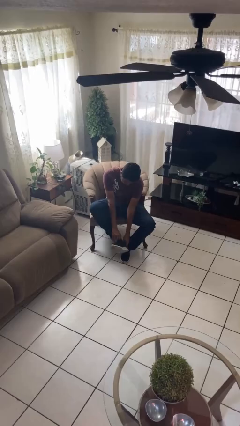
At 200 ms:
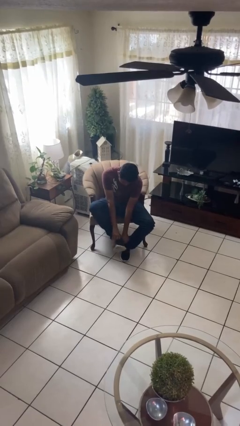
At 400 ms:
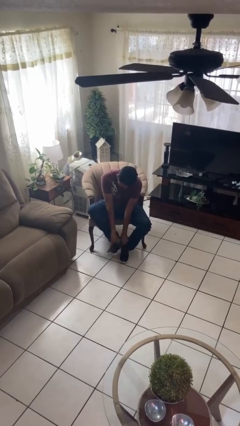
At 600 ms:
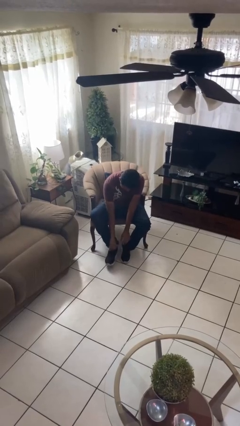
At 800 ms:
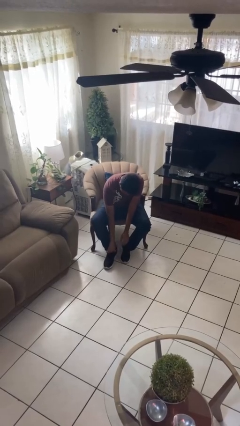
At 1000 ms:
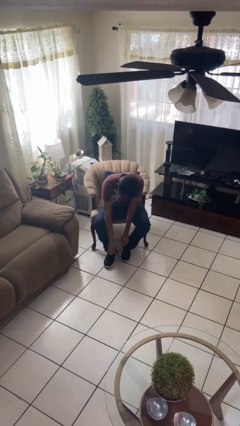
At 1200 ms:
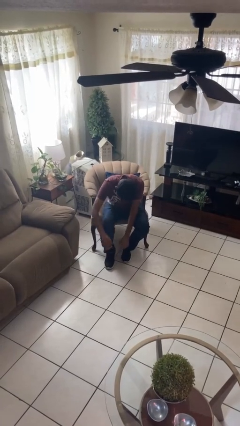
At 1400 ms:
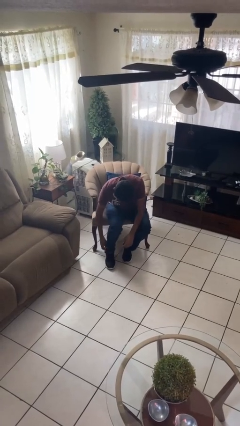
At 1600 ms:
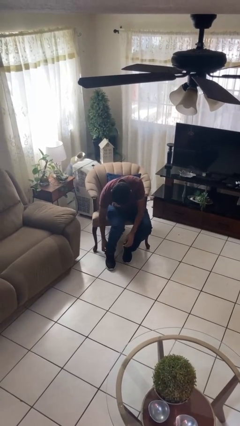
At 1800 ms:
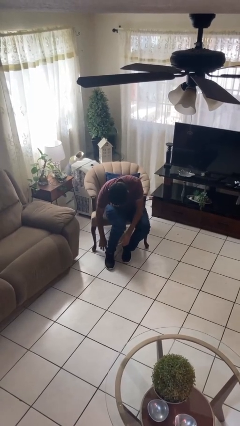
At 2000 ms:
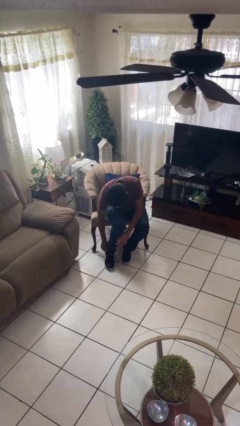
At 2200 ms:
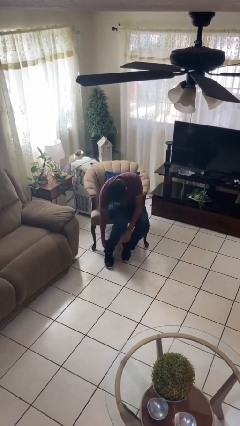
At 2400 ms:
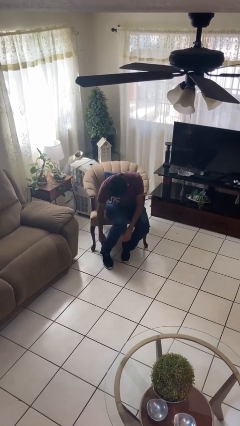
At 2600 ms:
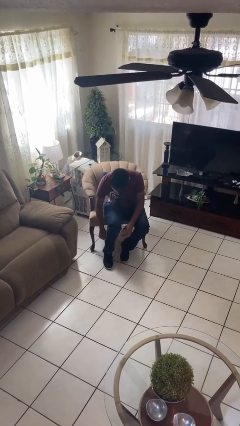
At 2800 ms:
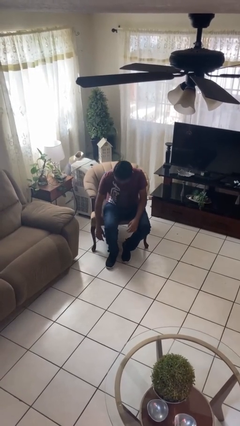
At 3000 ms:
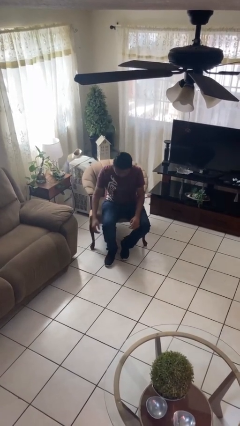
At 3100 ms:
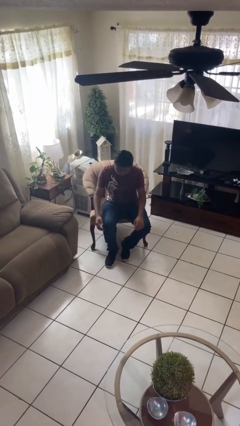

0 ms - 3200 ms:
person puts on shoes

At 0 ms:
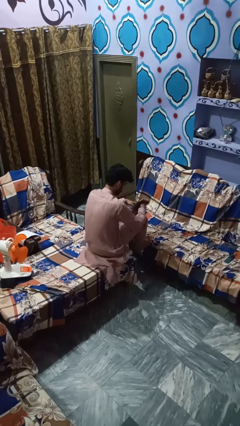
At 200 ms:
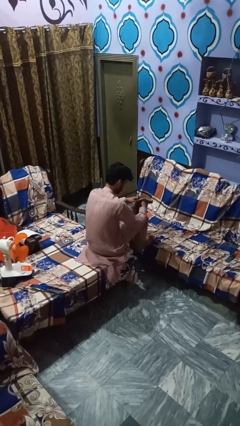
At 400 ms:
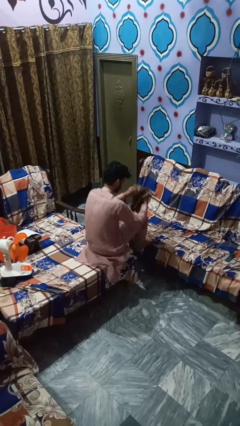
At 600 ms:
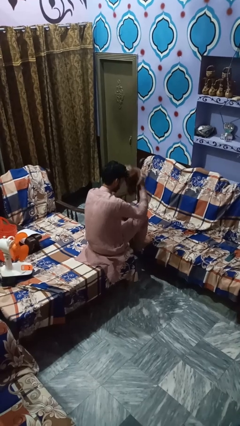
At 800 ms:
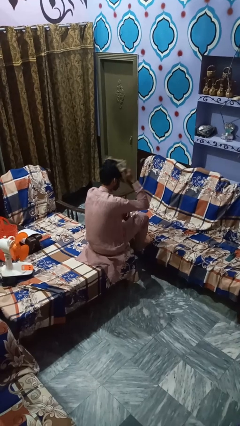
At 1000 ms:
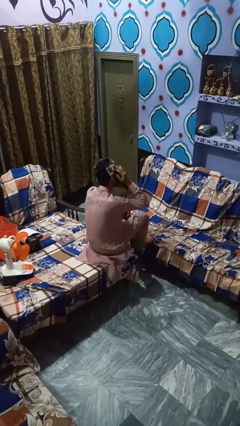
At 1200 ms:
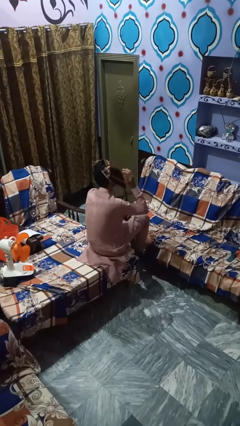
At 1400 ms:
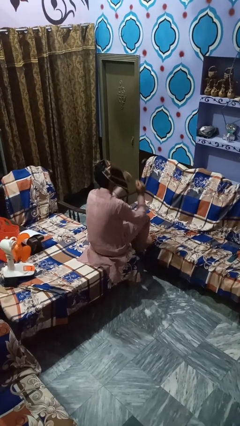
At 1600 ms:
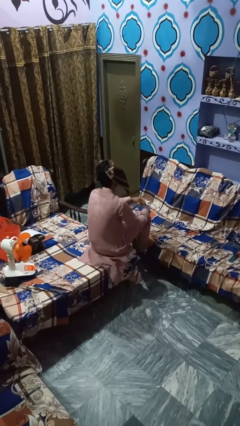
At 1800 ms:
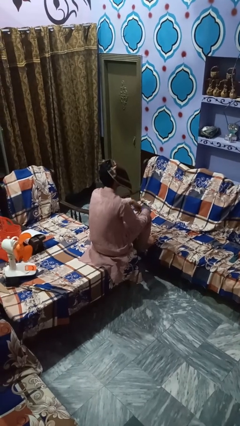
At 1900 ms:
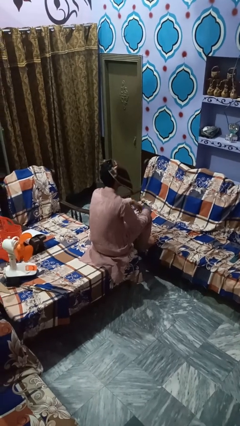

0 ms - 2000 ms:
person yawns

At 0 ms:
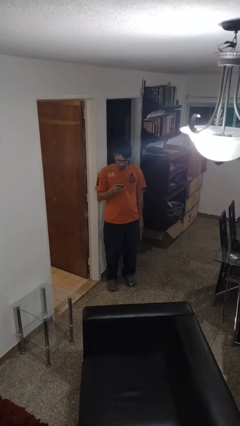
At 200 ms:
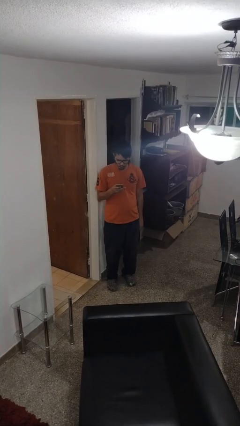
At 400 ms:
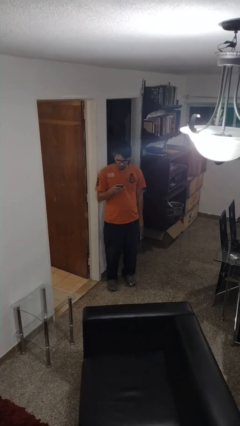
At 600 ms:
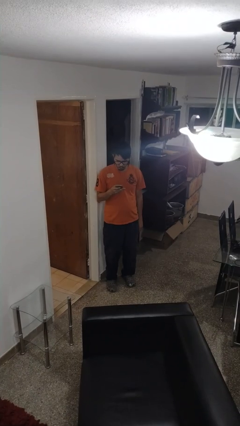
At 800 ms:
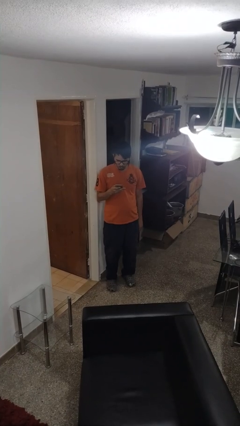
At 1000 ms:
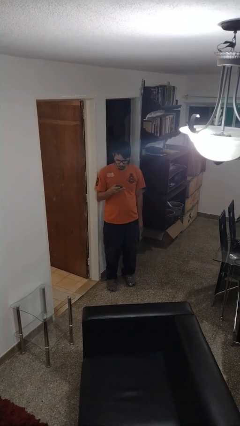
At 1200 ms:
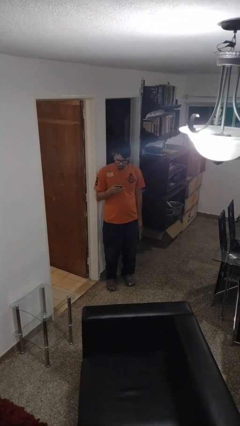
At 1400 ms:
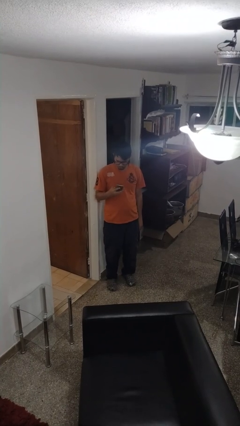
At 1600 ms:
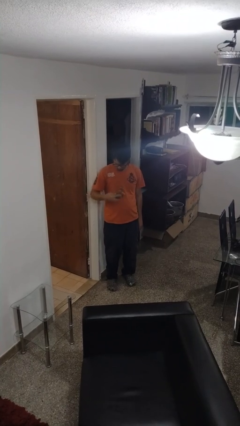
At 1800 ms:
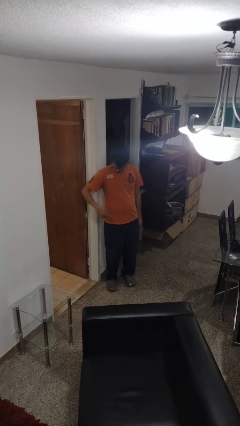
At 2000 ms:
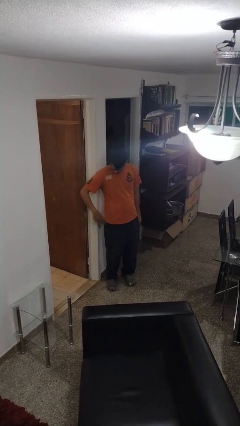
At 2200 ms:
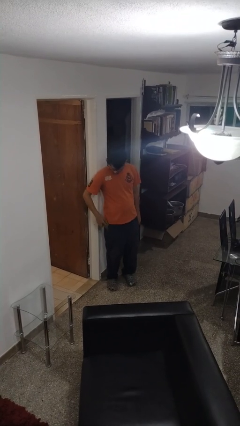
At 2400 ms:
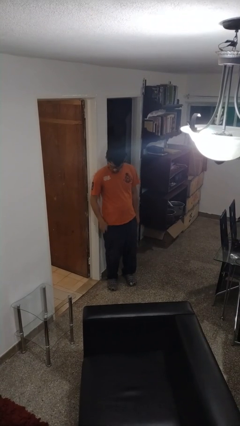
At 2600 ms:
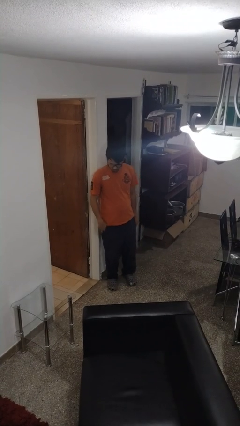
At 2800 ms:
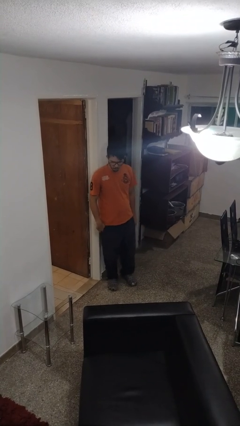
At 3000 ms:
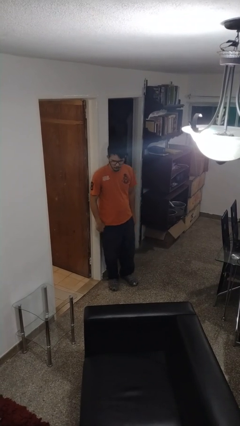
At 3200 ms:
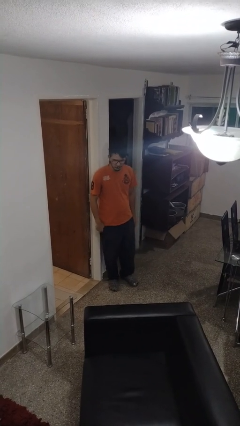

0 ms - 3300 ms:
person puts phone into pocket

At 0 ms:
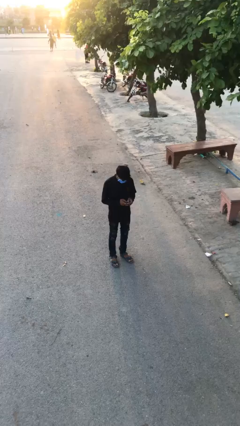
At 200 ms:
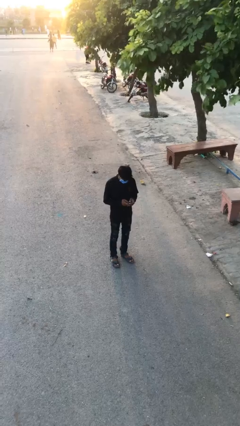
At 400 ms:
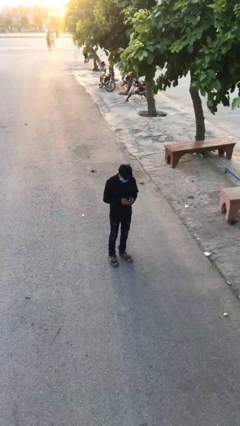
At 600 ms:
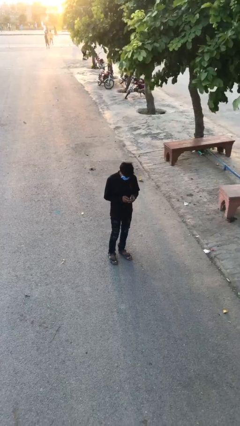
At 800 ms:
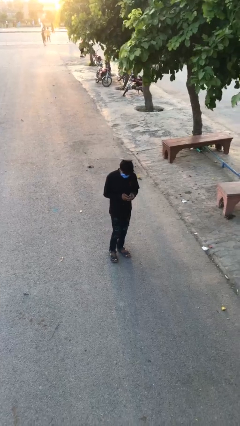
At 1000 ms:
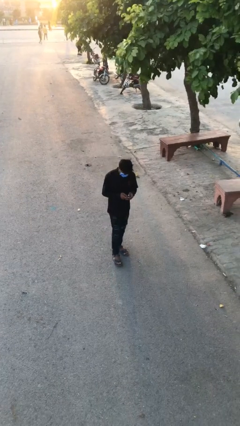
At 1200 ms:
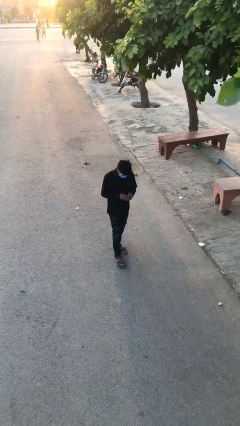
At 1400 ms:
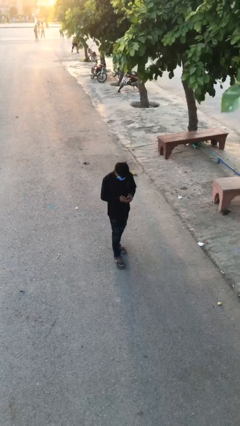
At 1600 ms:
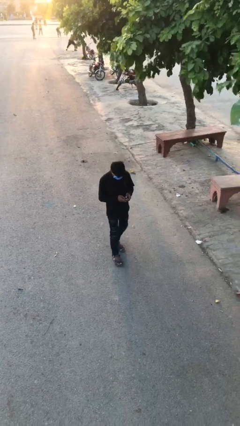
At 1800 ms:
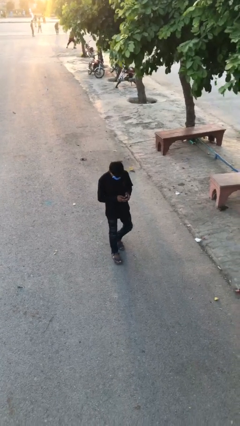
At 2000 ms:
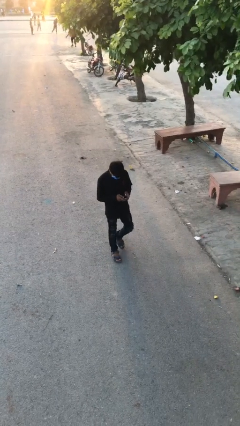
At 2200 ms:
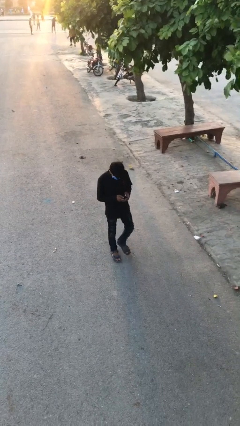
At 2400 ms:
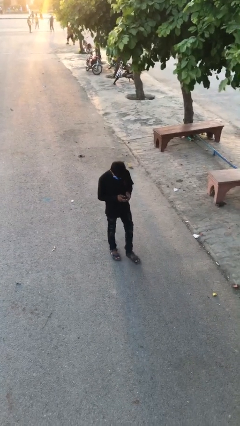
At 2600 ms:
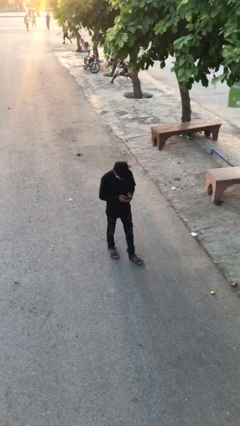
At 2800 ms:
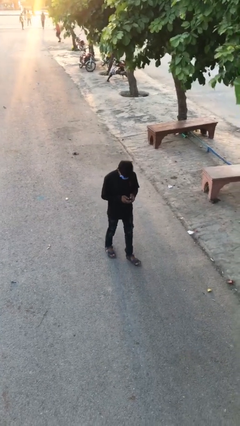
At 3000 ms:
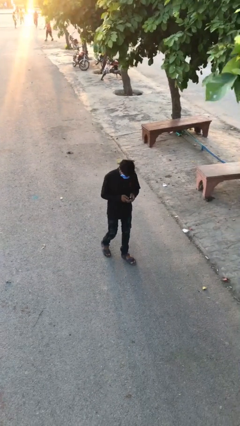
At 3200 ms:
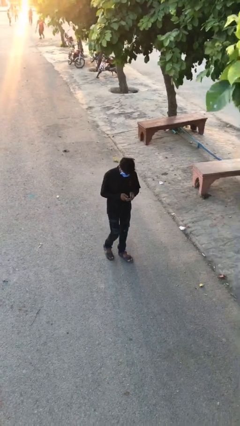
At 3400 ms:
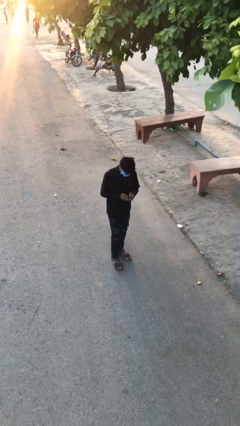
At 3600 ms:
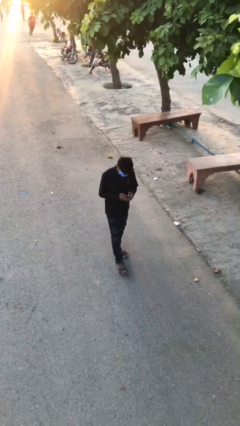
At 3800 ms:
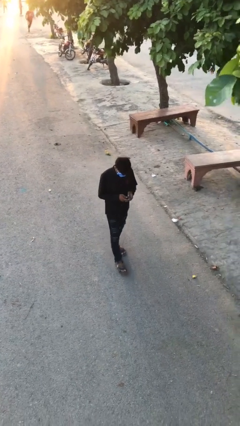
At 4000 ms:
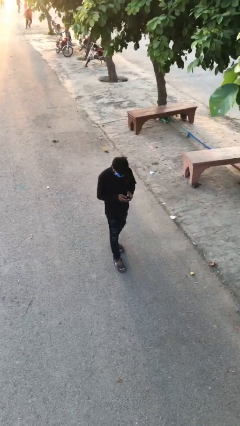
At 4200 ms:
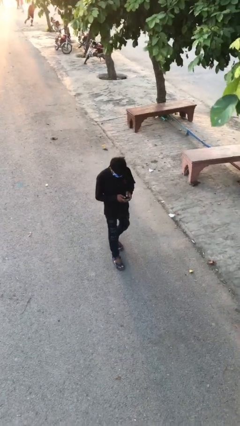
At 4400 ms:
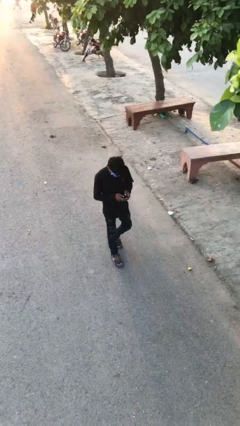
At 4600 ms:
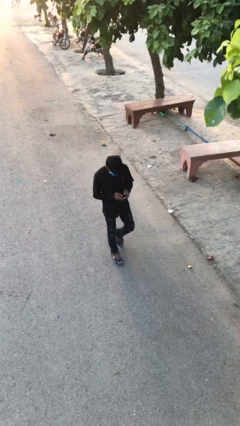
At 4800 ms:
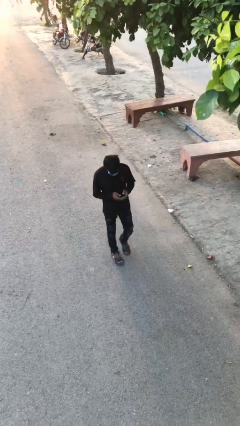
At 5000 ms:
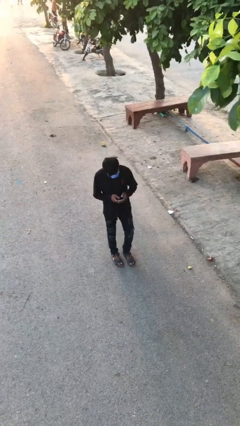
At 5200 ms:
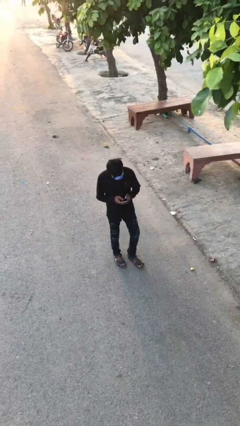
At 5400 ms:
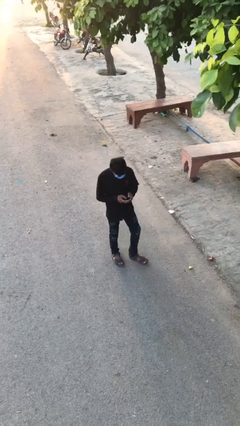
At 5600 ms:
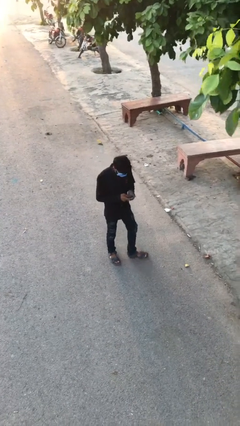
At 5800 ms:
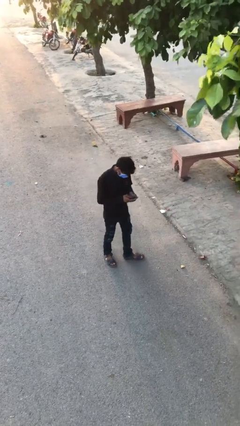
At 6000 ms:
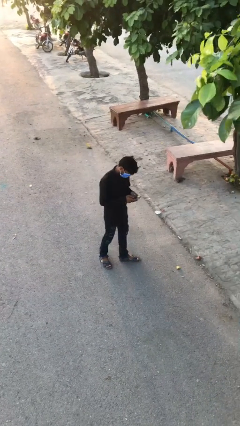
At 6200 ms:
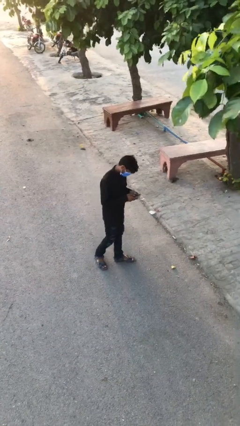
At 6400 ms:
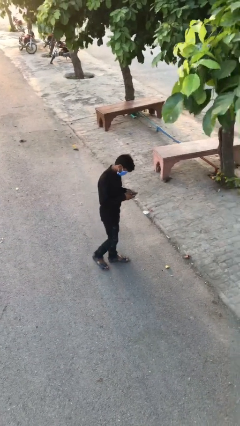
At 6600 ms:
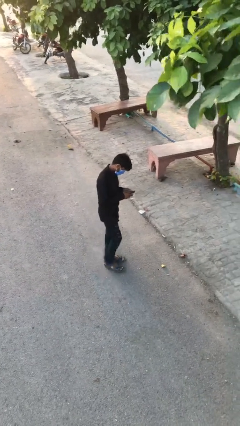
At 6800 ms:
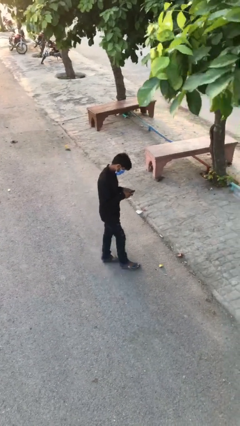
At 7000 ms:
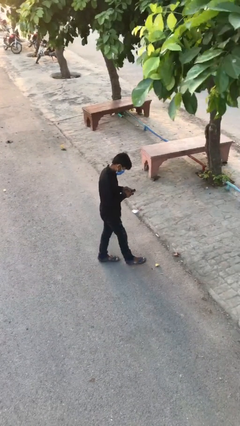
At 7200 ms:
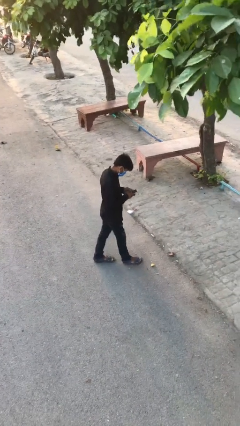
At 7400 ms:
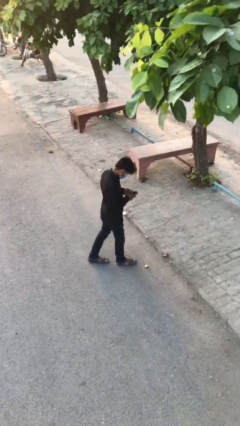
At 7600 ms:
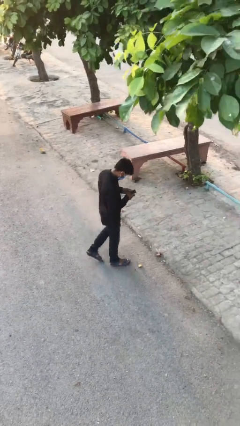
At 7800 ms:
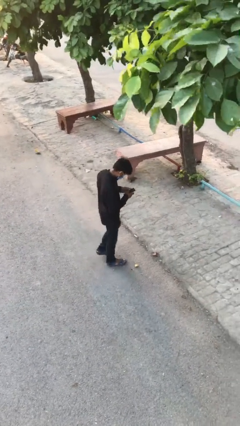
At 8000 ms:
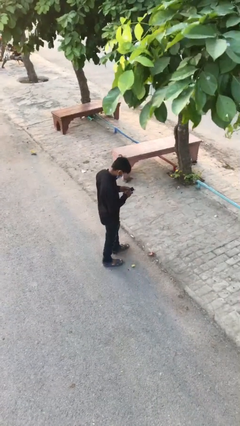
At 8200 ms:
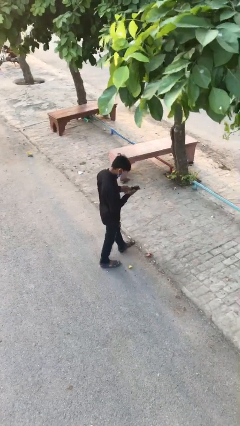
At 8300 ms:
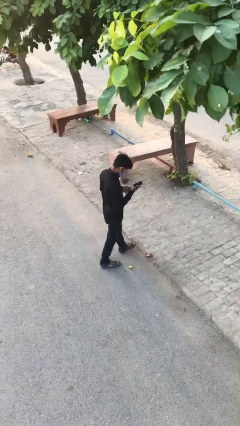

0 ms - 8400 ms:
person texts on phone

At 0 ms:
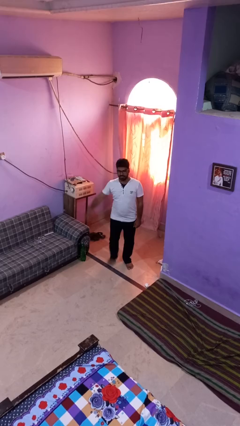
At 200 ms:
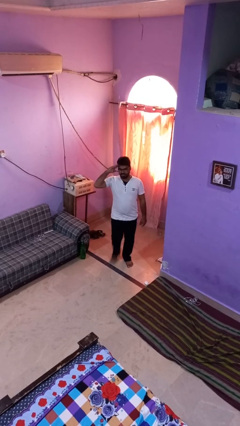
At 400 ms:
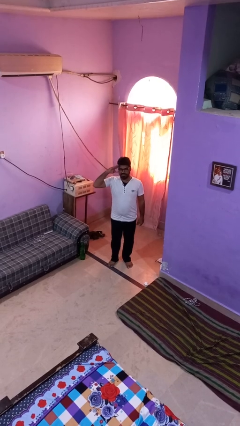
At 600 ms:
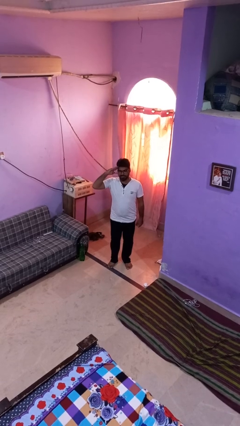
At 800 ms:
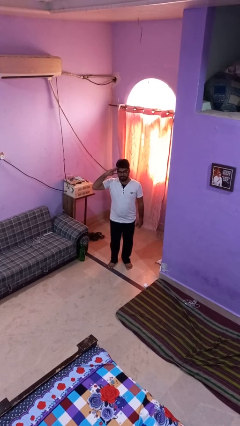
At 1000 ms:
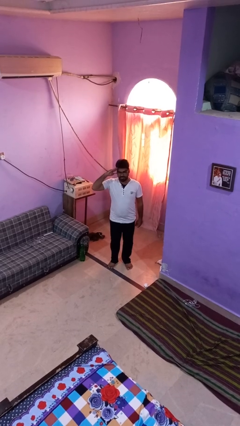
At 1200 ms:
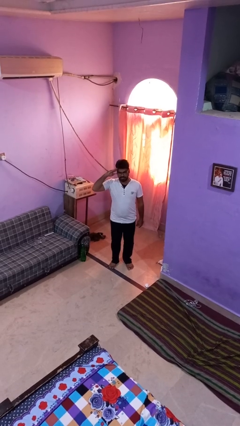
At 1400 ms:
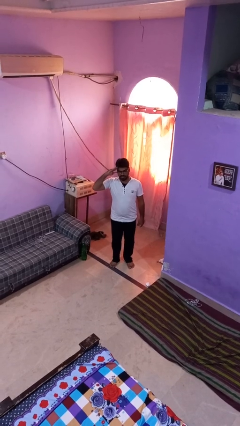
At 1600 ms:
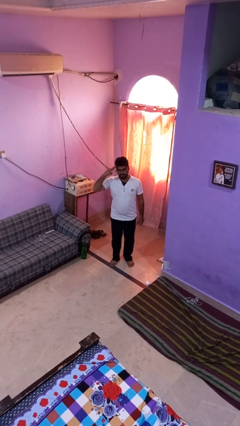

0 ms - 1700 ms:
person salutes
